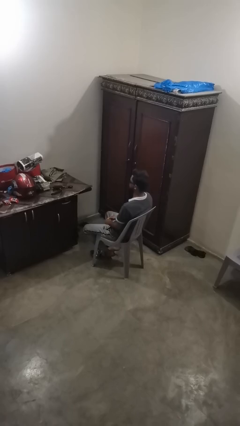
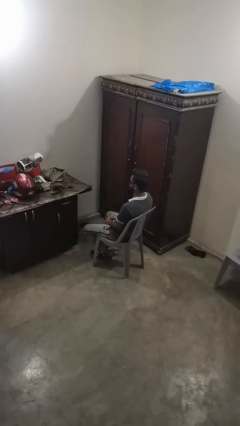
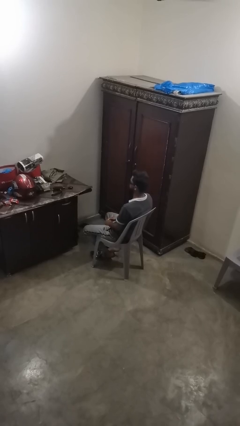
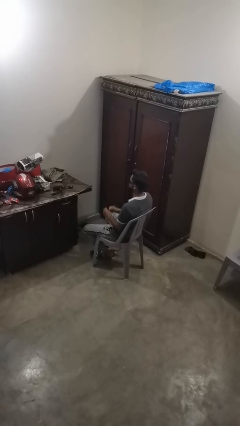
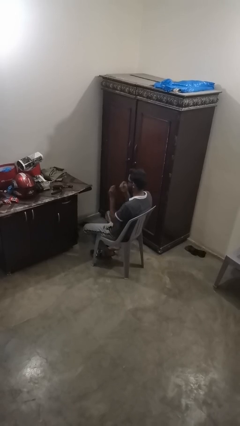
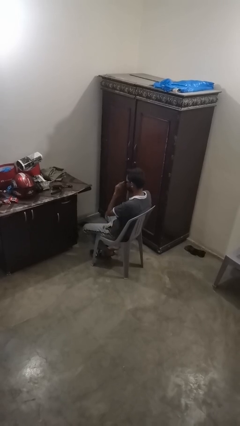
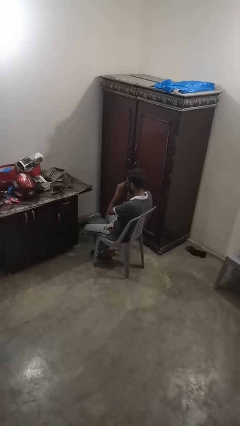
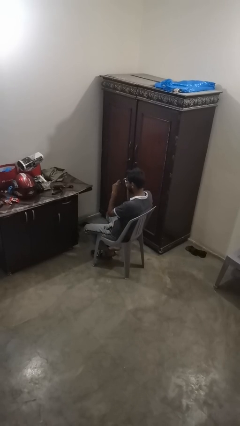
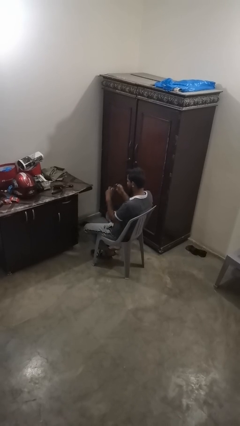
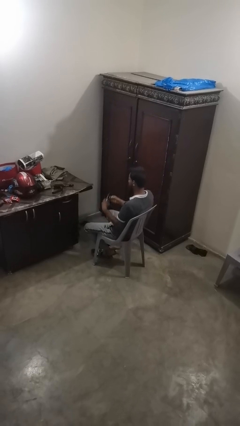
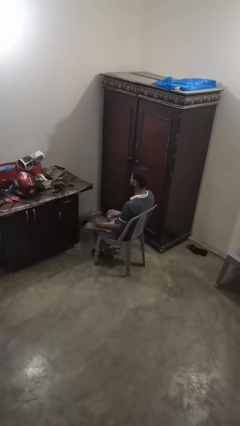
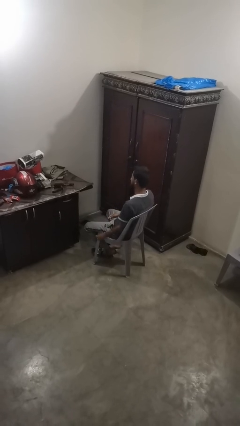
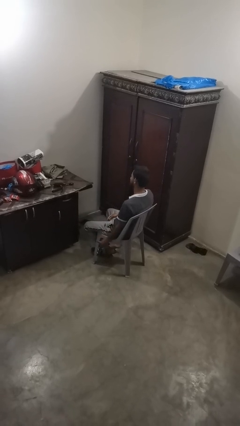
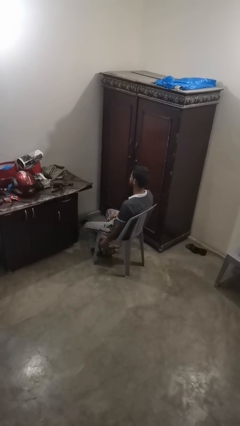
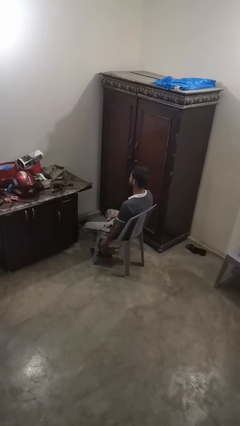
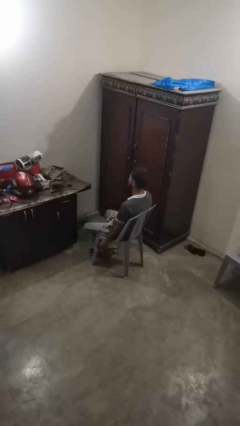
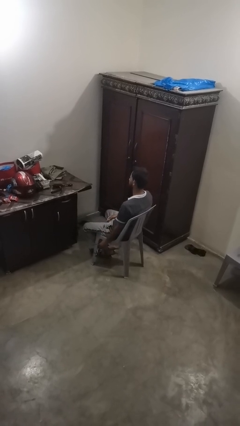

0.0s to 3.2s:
person takes off sunglasses

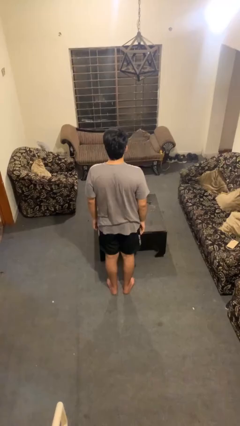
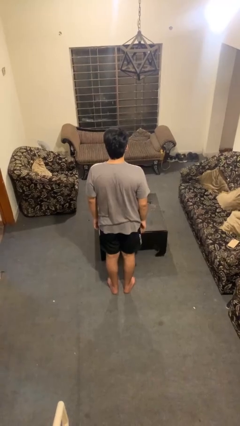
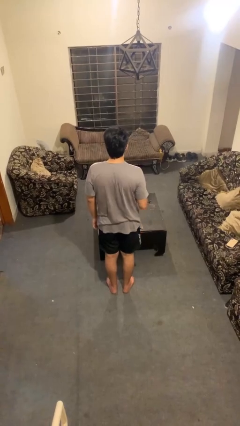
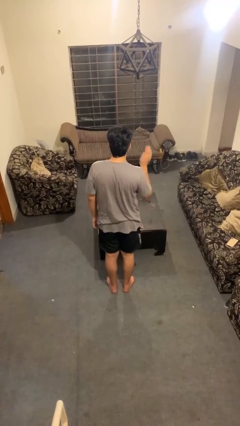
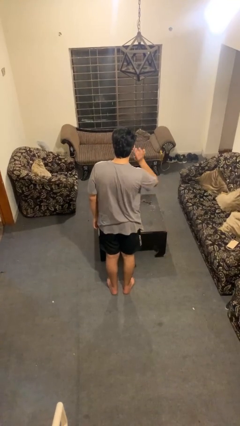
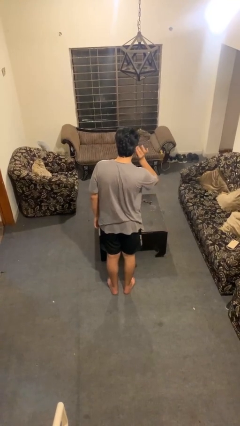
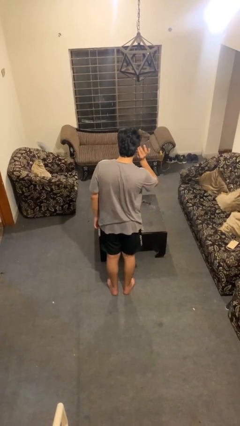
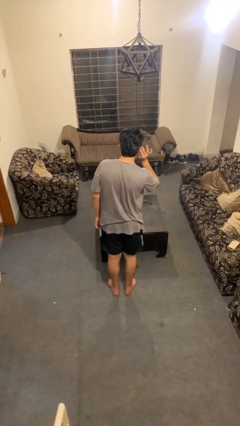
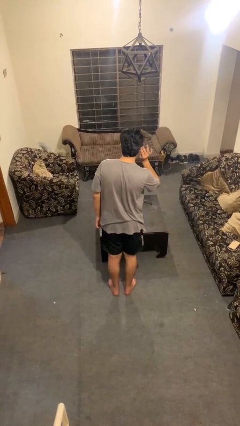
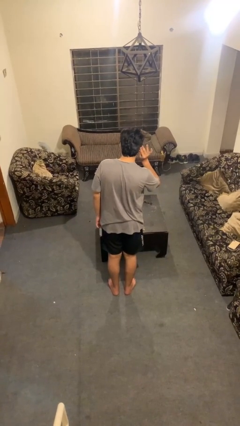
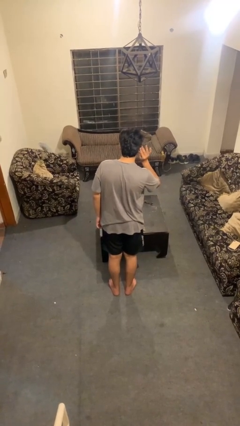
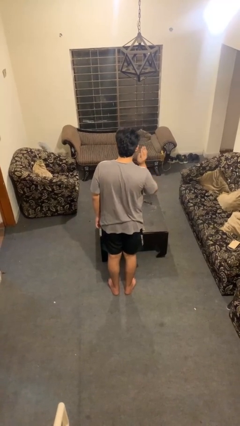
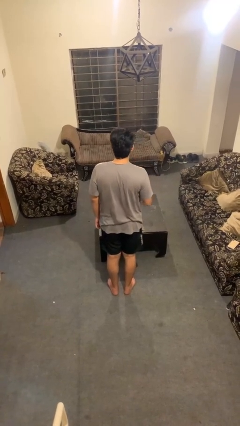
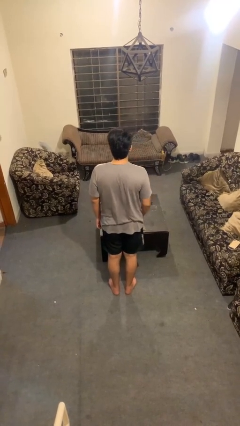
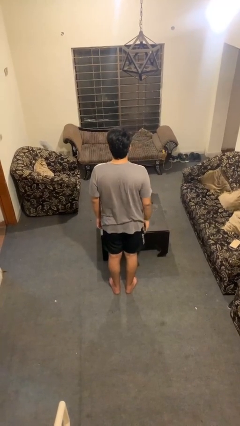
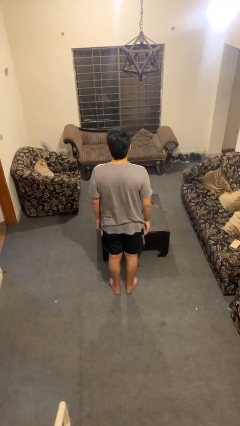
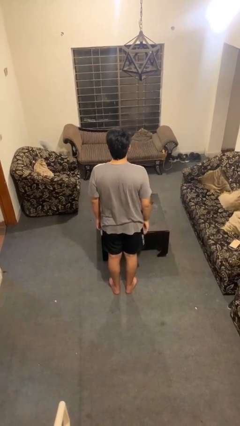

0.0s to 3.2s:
person gestures listen closely

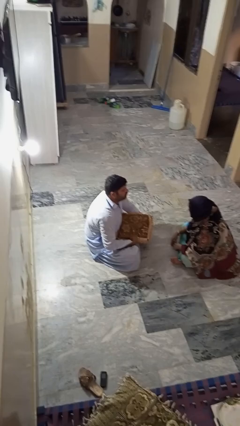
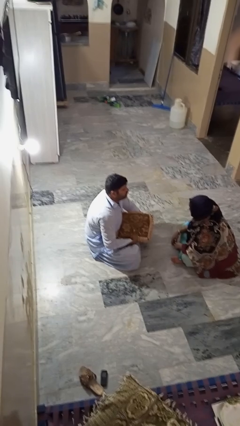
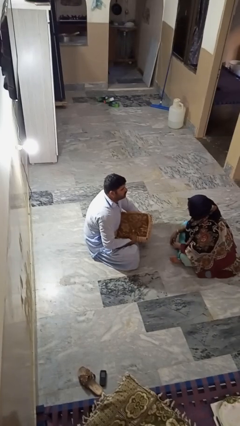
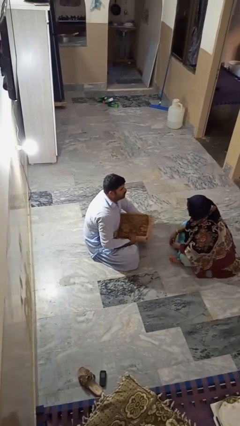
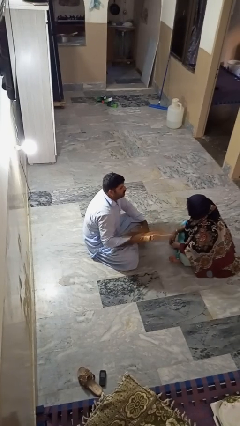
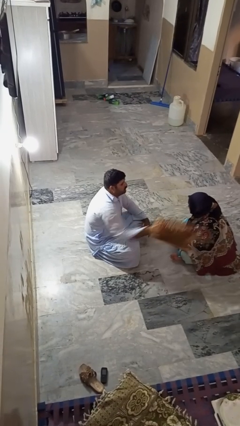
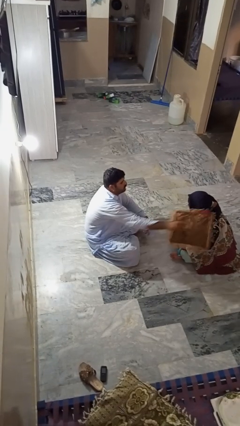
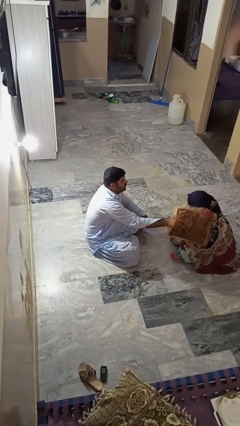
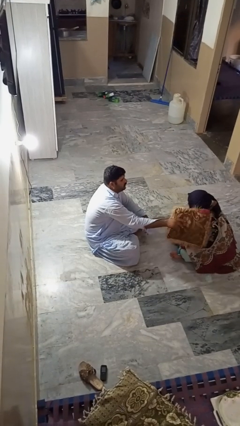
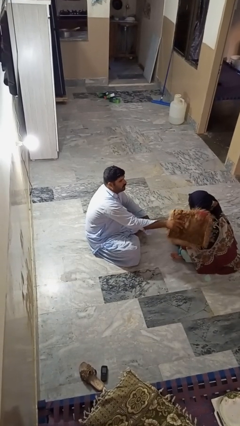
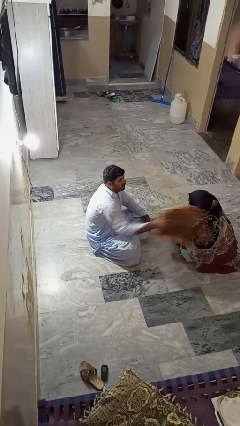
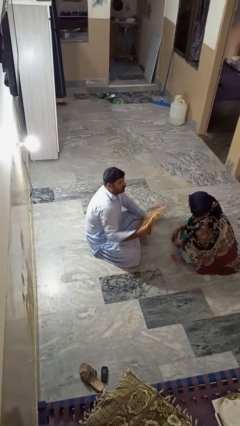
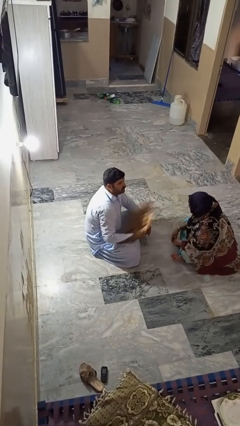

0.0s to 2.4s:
person hits person with pillow

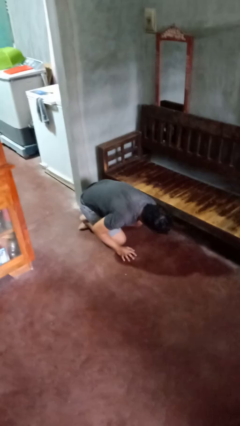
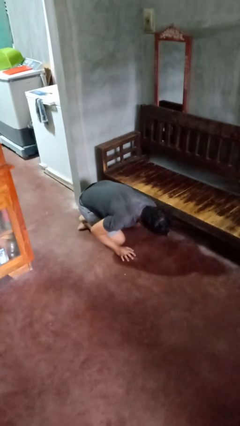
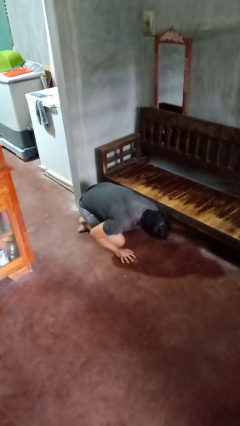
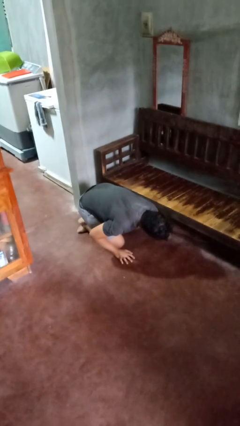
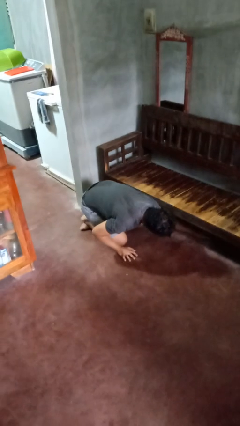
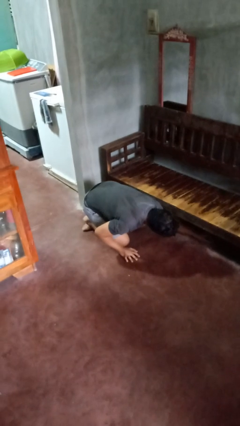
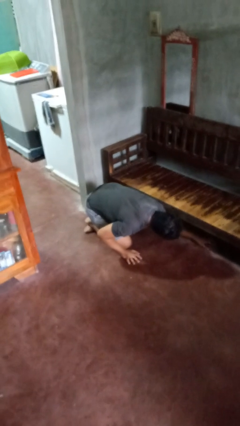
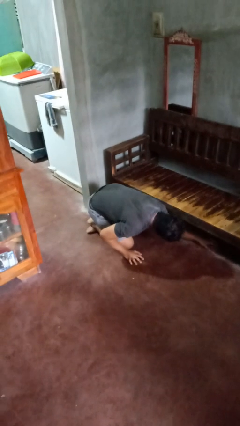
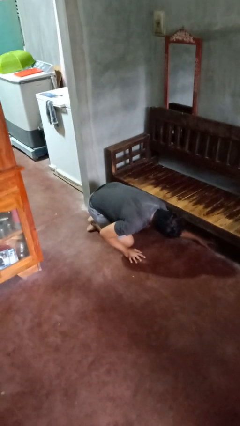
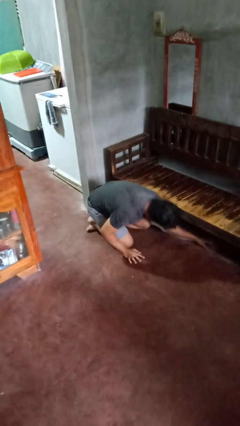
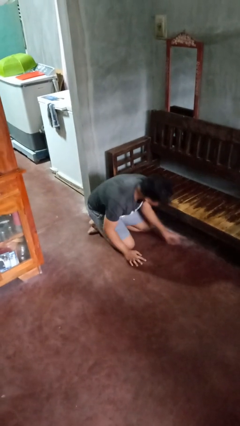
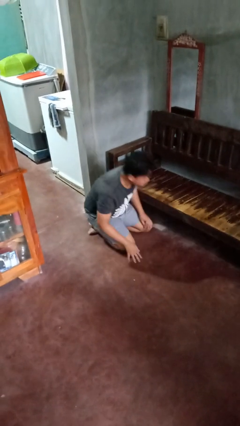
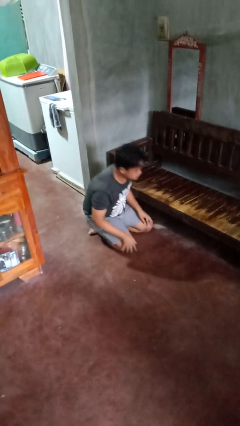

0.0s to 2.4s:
person searches under couch

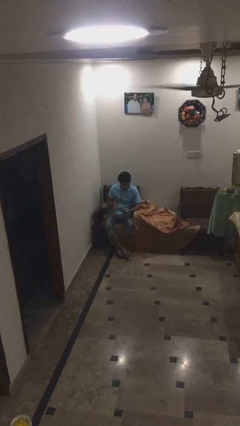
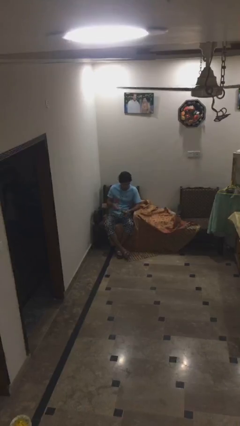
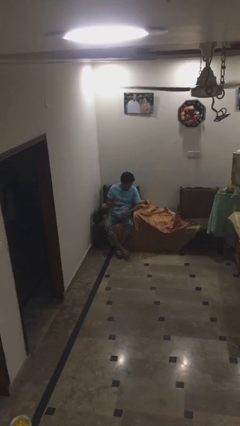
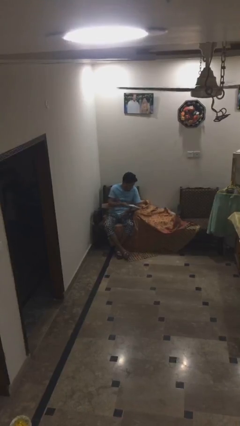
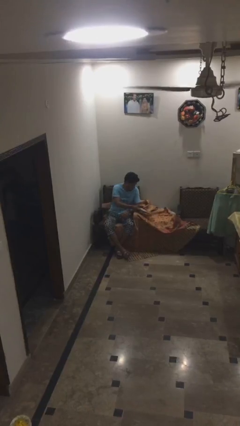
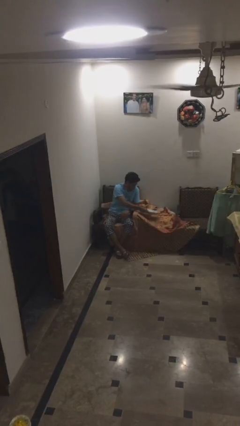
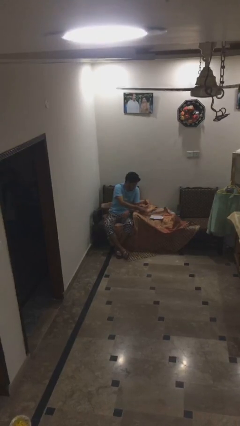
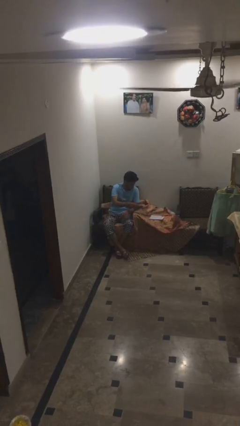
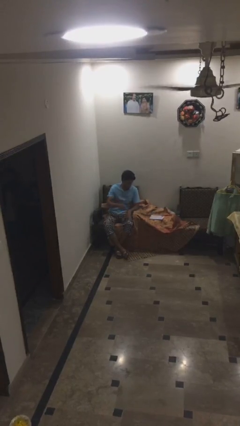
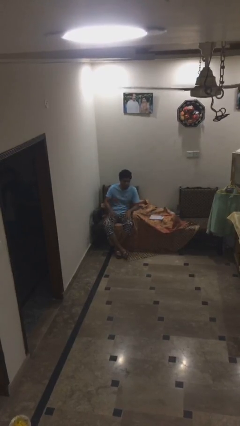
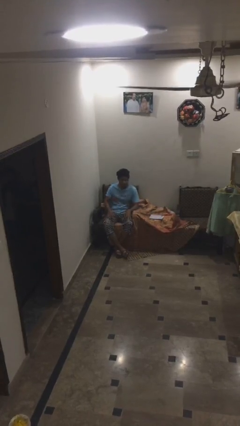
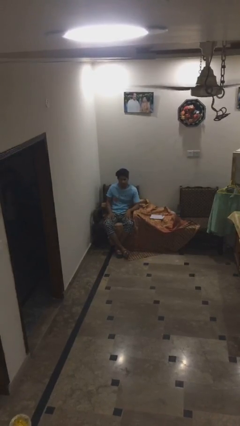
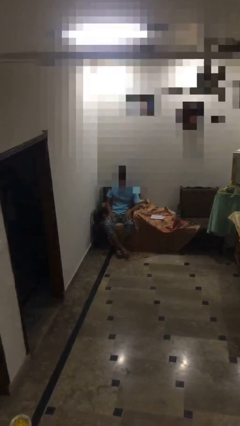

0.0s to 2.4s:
person puts down object on table

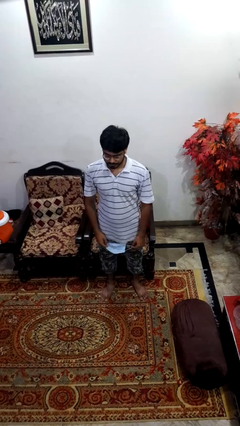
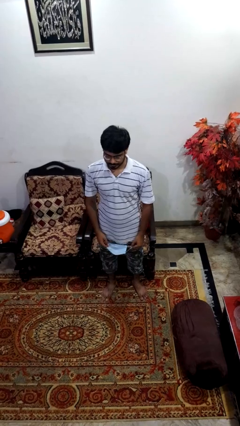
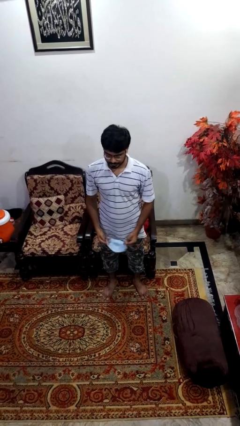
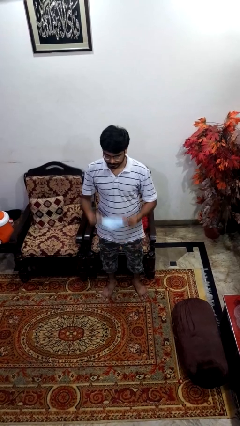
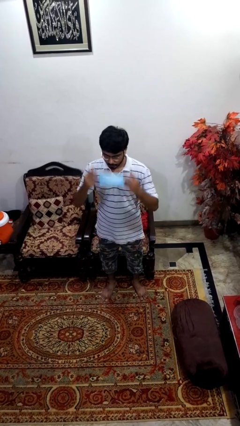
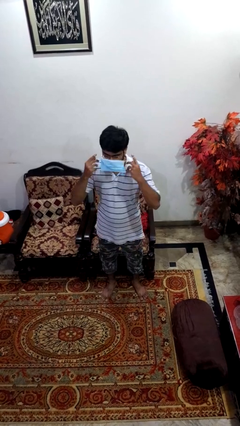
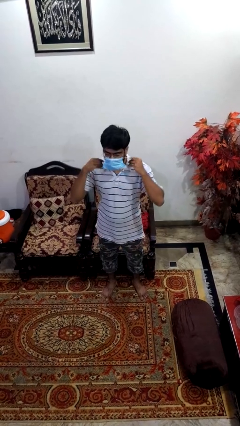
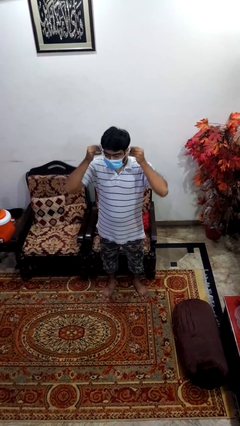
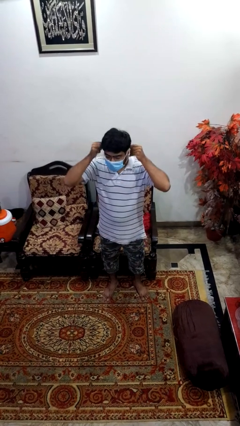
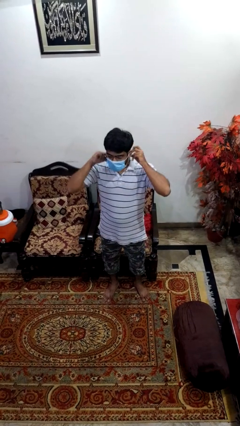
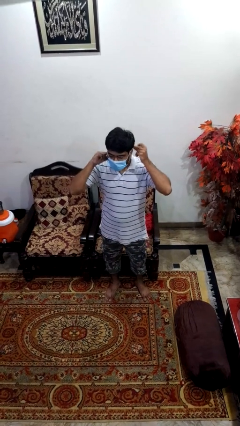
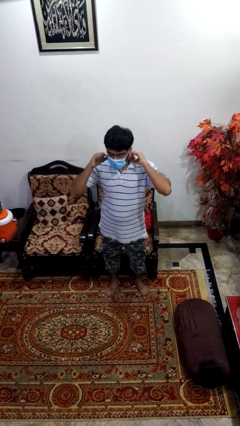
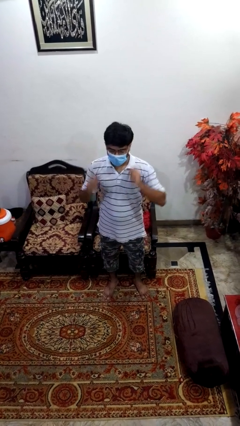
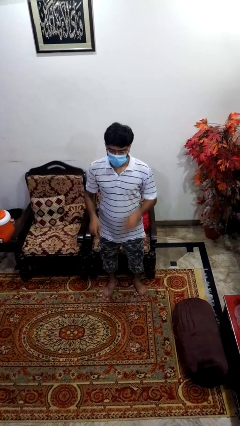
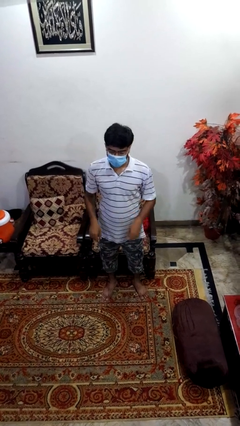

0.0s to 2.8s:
person puts on facemask

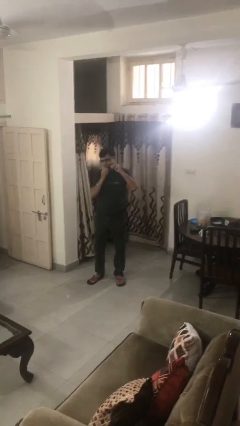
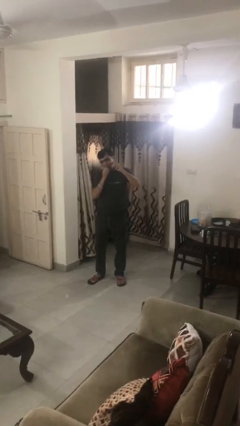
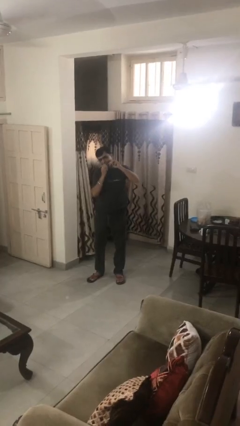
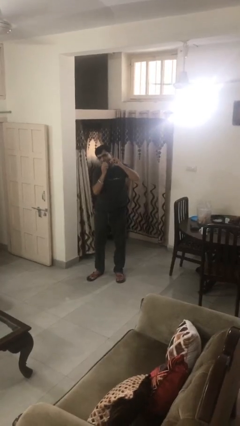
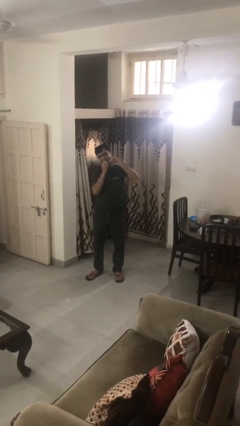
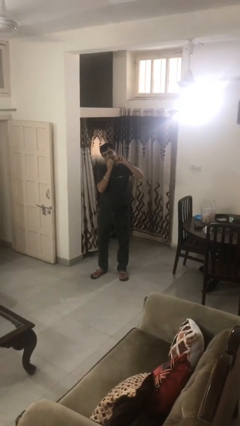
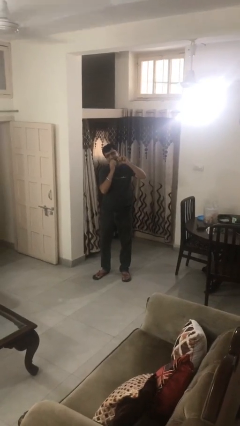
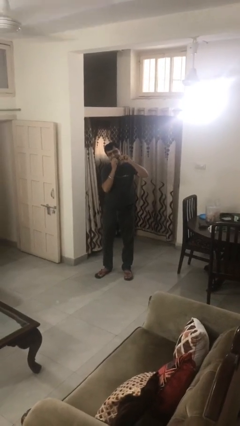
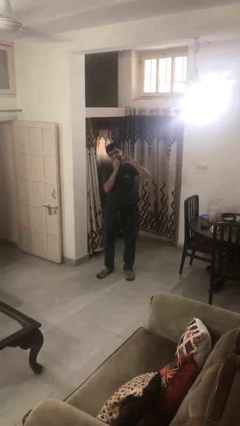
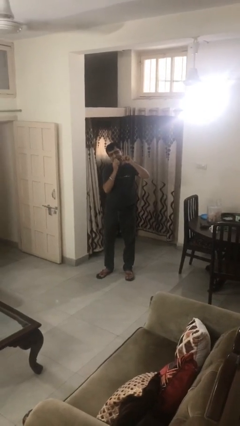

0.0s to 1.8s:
person flosses
